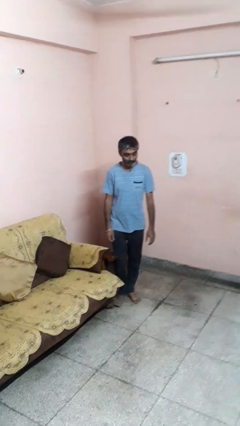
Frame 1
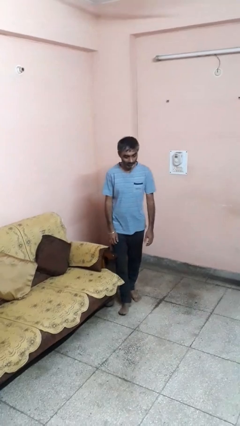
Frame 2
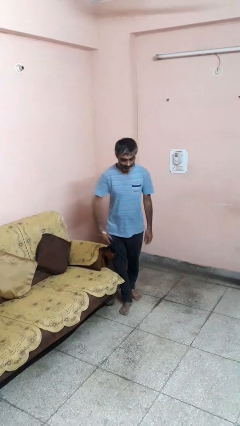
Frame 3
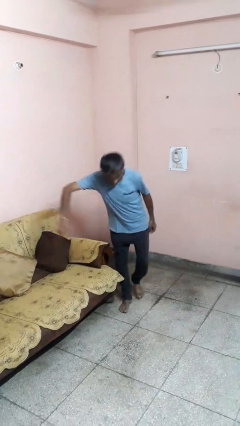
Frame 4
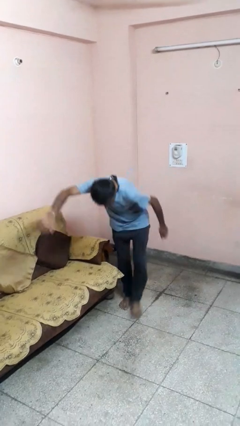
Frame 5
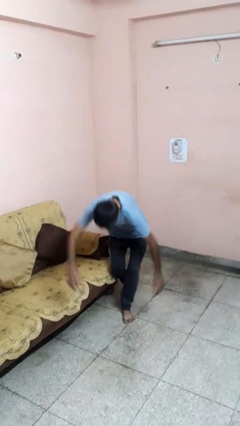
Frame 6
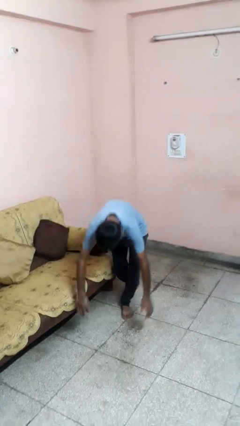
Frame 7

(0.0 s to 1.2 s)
person trips on object on floor

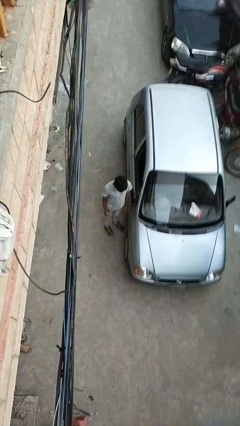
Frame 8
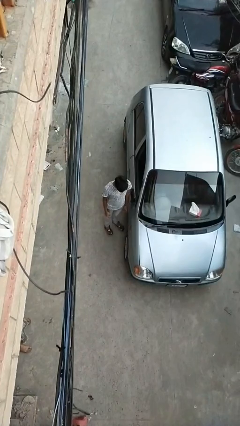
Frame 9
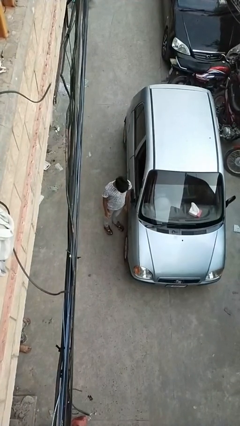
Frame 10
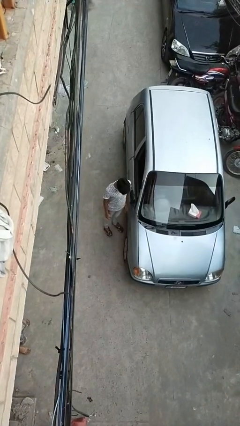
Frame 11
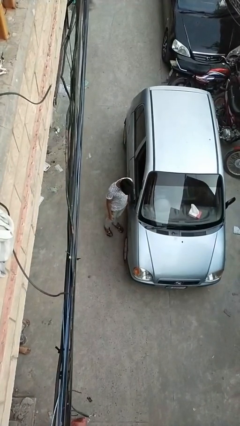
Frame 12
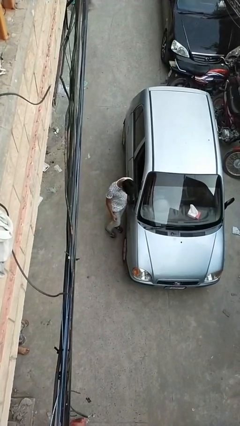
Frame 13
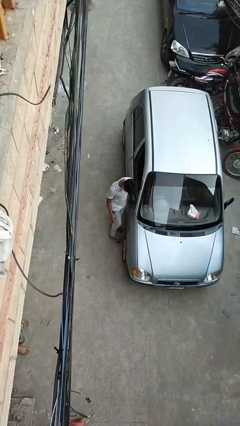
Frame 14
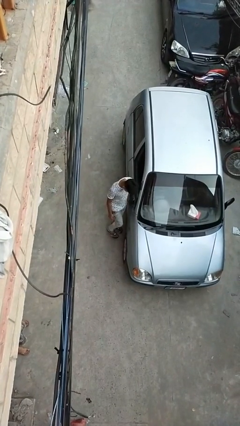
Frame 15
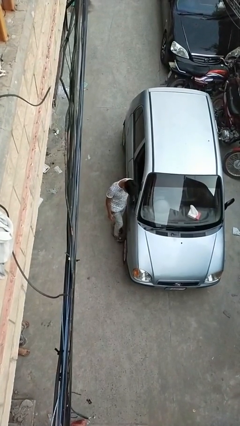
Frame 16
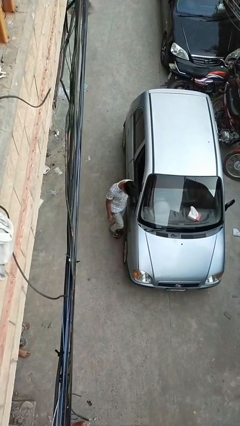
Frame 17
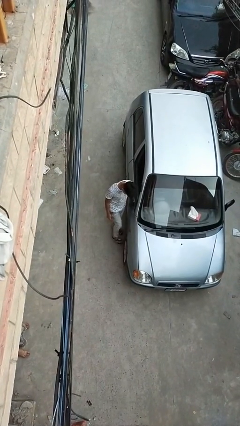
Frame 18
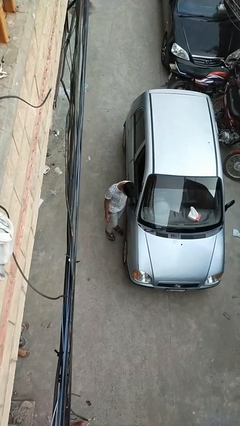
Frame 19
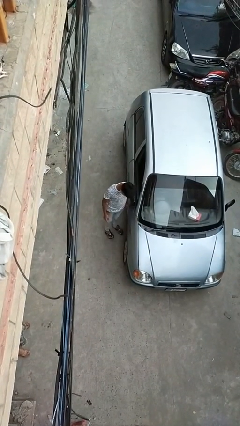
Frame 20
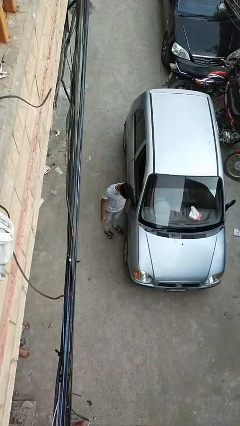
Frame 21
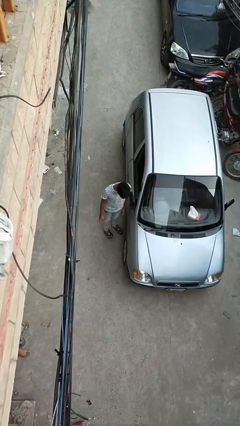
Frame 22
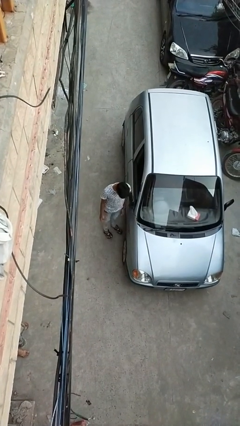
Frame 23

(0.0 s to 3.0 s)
person kicks car tires

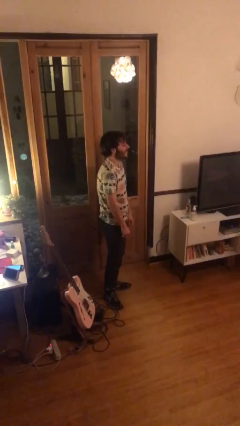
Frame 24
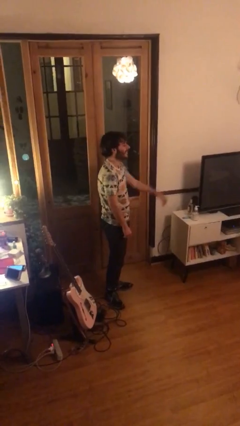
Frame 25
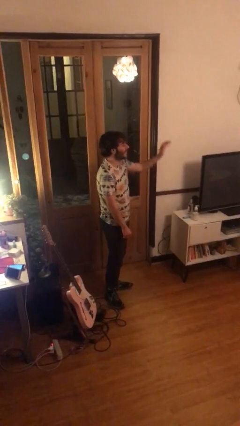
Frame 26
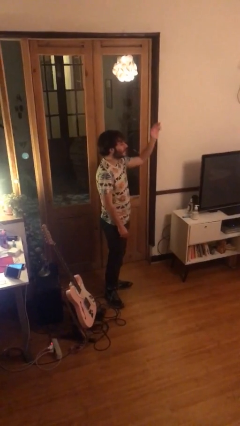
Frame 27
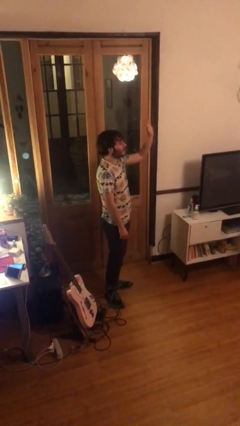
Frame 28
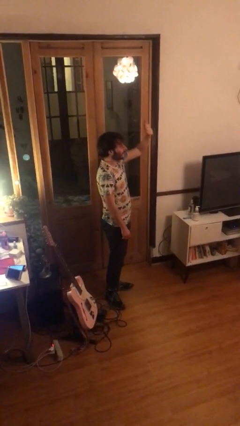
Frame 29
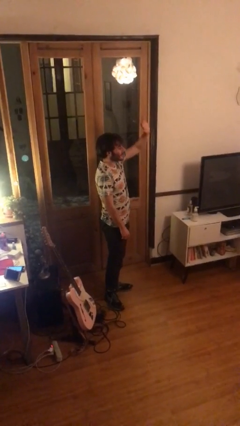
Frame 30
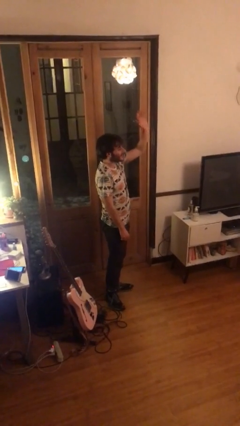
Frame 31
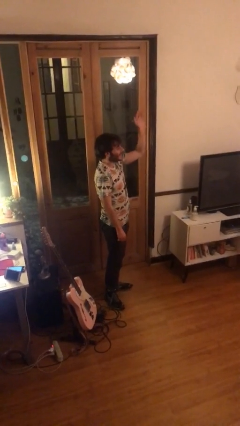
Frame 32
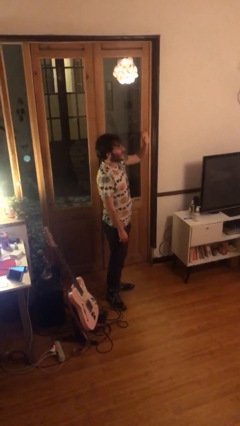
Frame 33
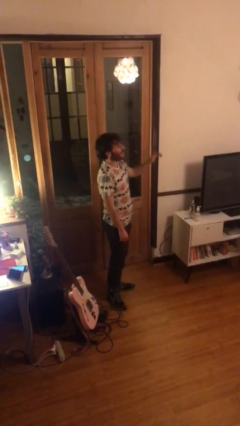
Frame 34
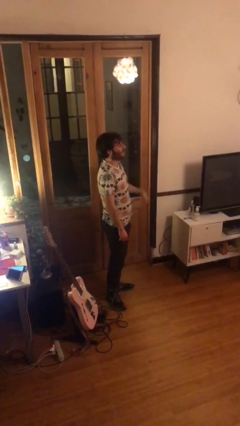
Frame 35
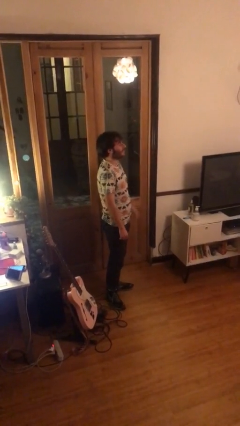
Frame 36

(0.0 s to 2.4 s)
person waves at person

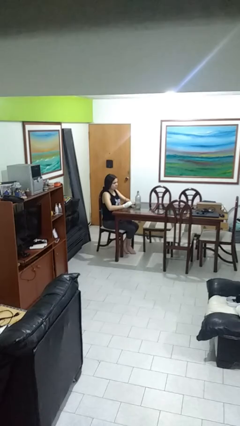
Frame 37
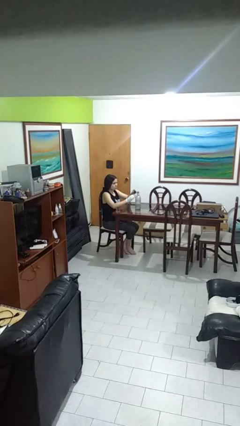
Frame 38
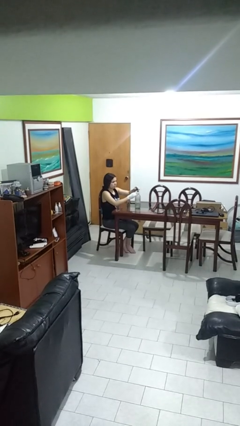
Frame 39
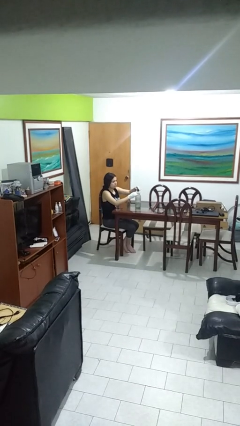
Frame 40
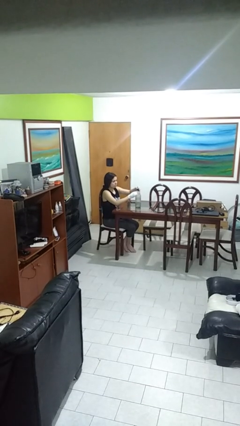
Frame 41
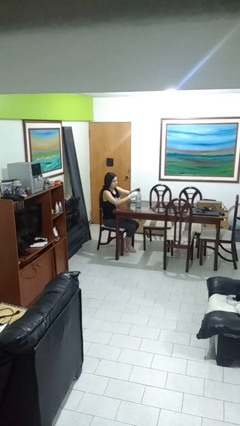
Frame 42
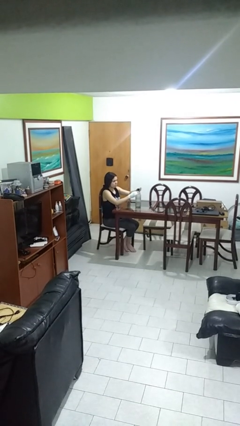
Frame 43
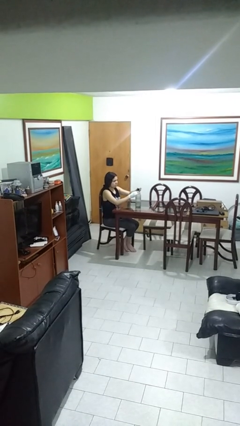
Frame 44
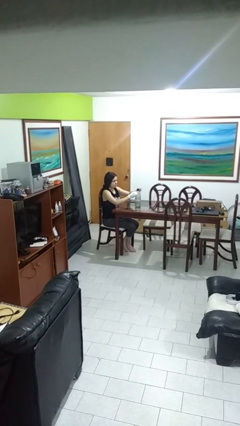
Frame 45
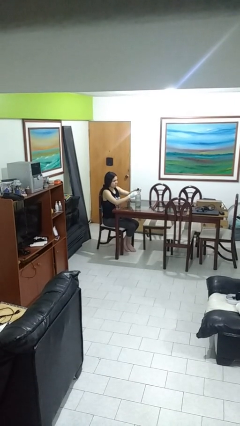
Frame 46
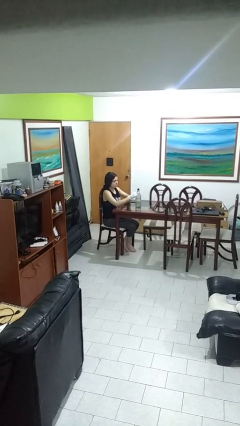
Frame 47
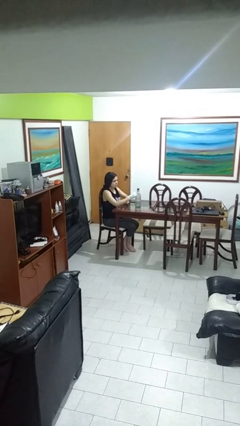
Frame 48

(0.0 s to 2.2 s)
person screws lid to bottle

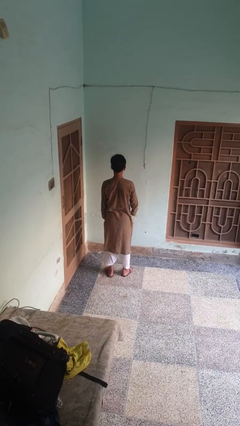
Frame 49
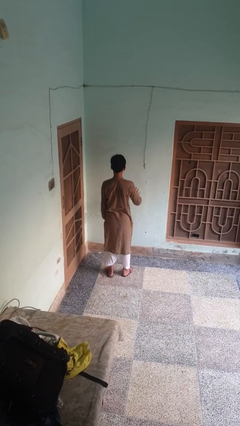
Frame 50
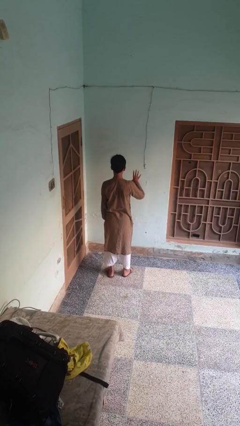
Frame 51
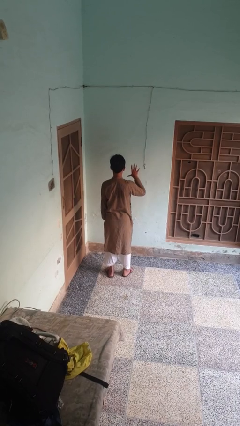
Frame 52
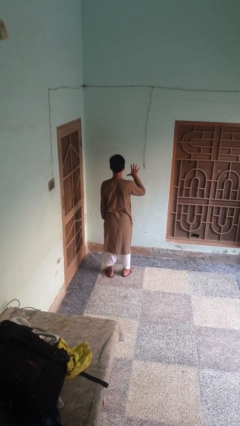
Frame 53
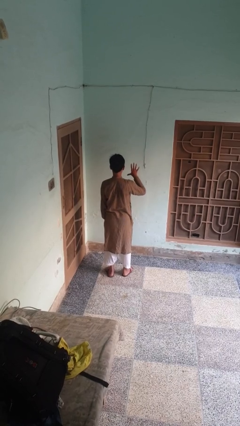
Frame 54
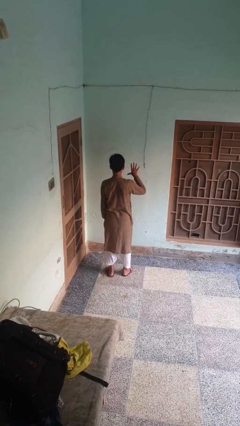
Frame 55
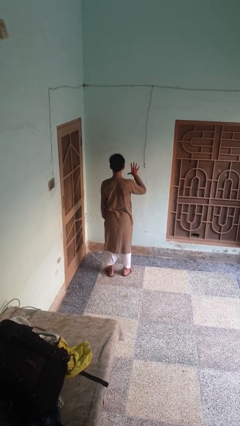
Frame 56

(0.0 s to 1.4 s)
person gestures number five

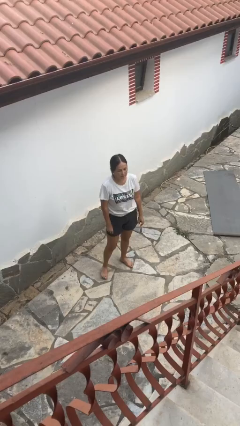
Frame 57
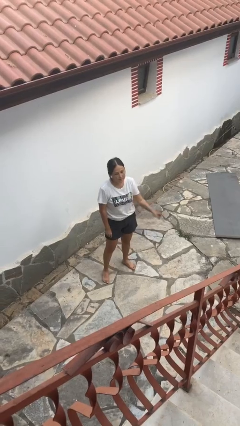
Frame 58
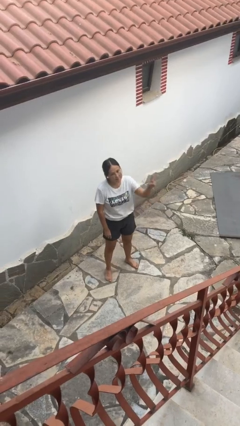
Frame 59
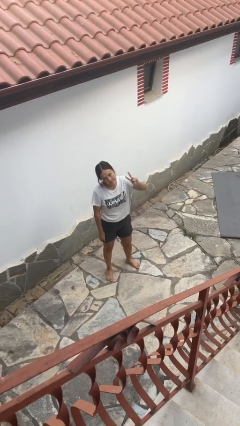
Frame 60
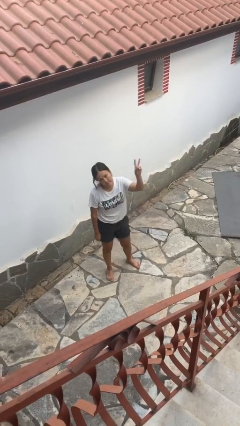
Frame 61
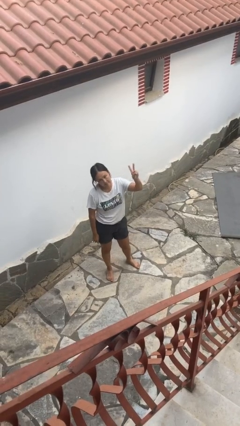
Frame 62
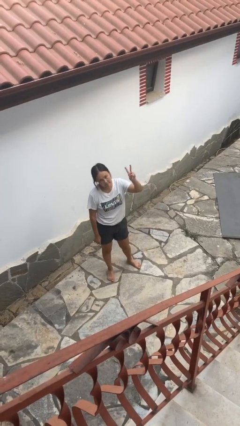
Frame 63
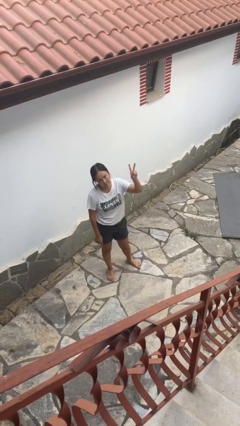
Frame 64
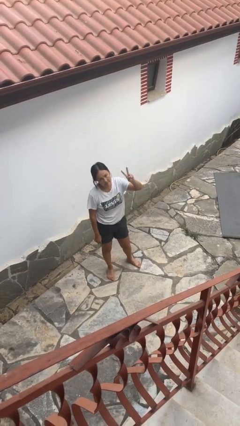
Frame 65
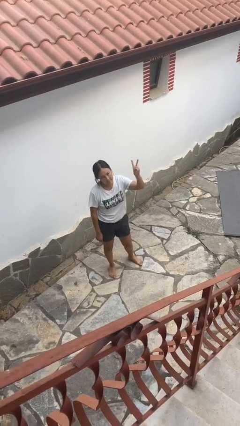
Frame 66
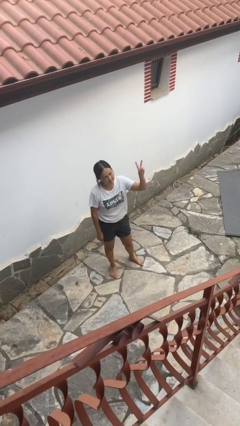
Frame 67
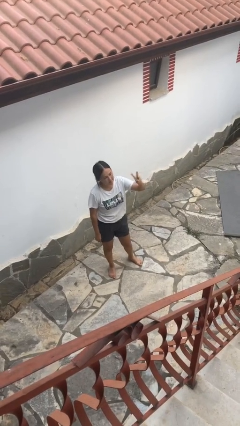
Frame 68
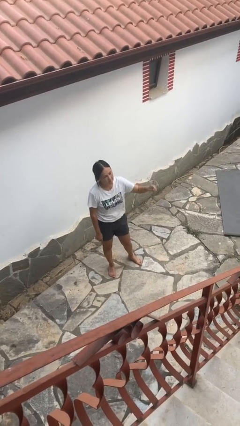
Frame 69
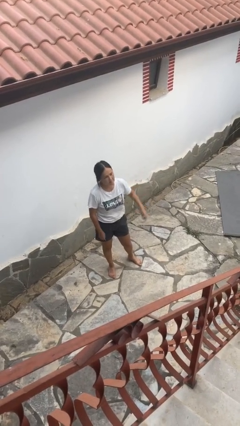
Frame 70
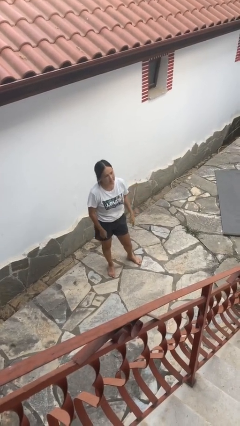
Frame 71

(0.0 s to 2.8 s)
person gestures peace

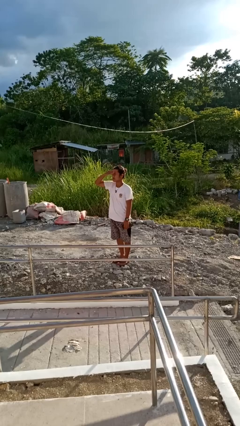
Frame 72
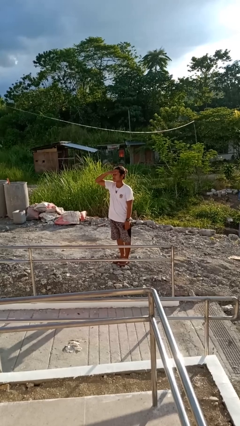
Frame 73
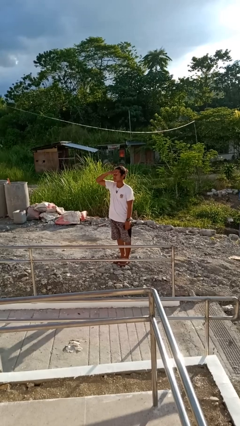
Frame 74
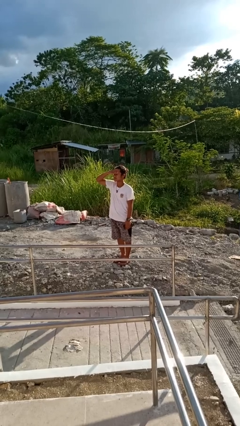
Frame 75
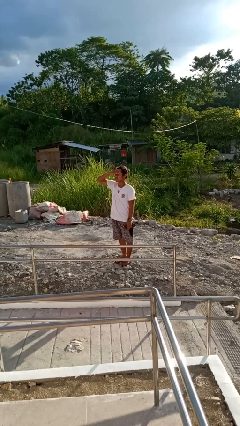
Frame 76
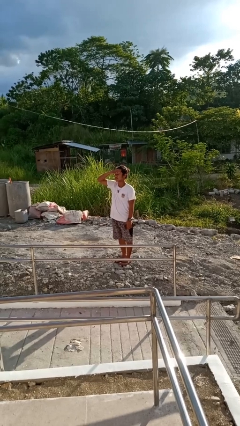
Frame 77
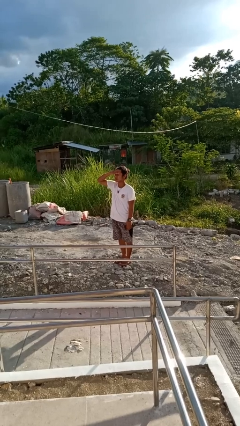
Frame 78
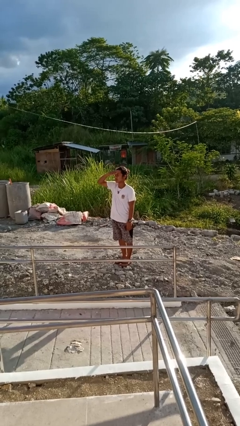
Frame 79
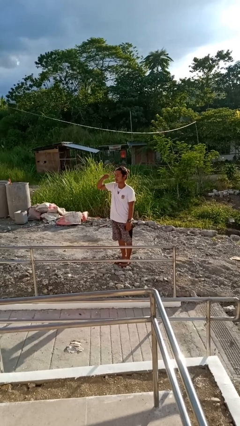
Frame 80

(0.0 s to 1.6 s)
person shades eyes

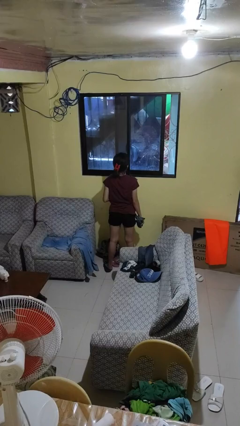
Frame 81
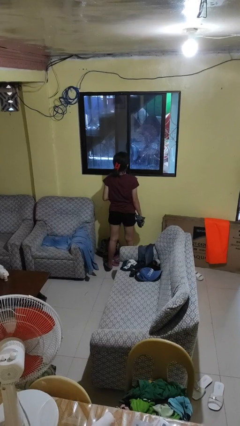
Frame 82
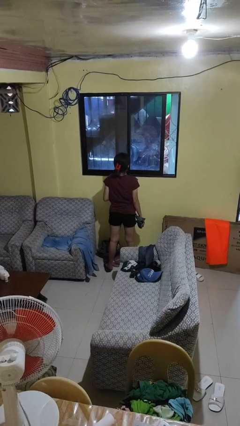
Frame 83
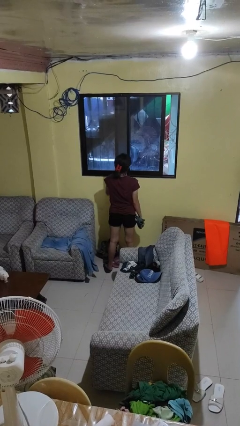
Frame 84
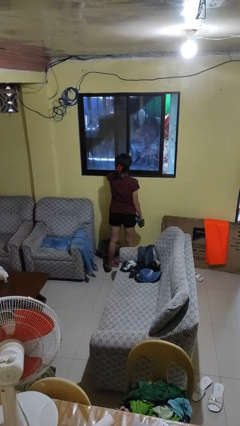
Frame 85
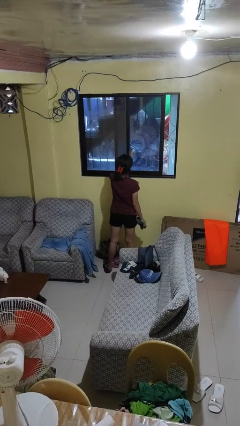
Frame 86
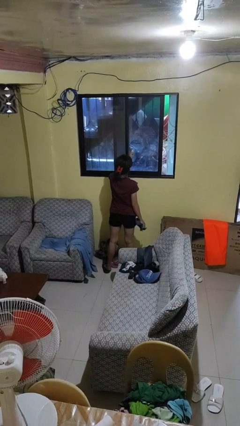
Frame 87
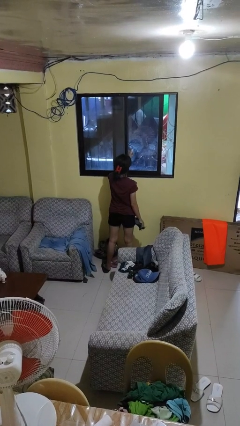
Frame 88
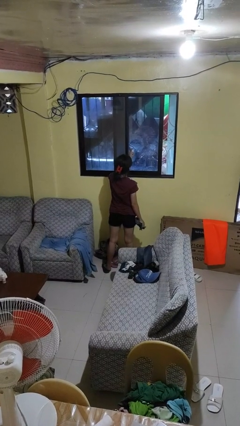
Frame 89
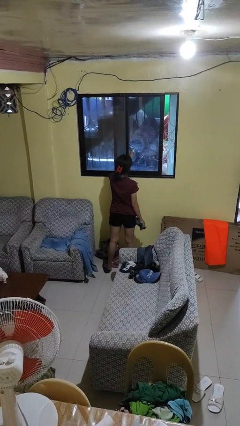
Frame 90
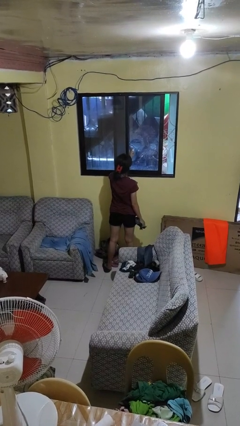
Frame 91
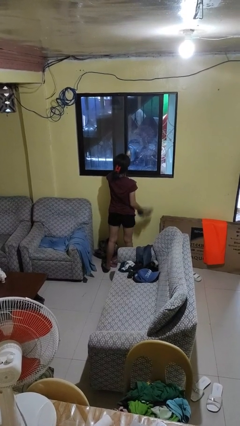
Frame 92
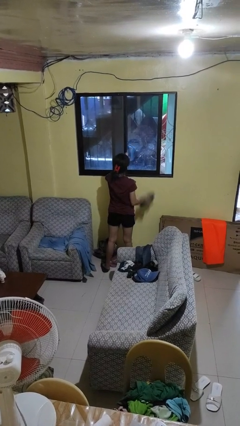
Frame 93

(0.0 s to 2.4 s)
person sprays from bottle
